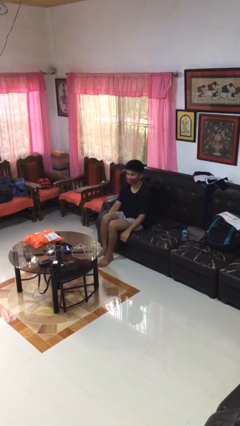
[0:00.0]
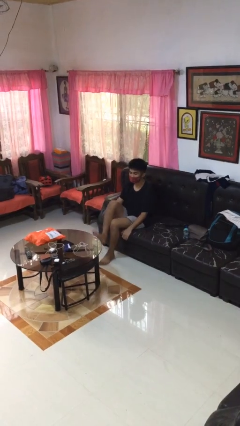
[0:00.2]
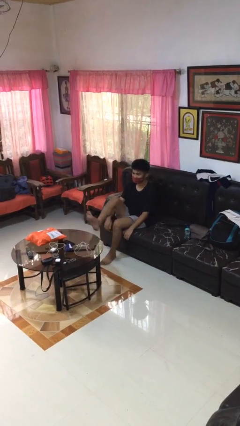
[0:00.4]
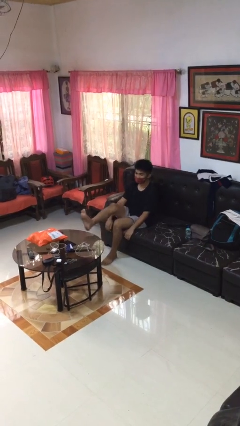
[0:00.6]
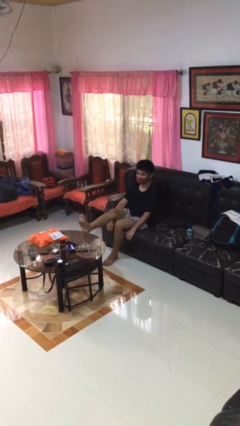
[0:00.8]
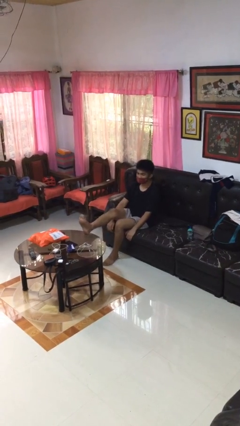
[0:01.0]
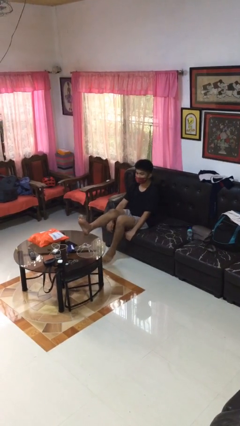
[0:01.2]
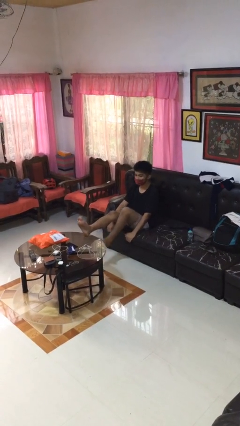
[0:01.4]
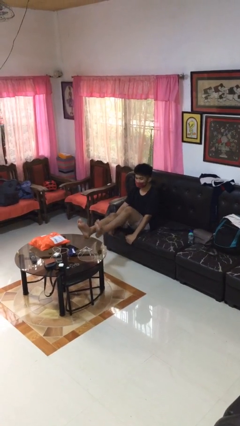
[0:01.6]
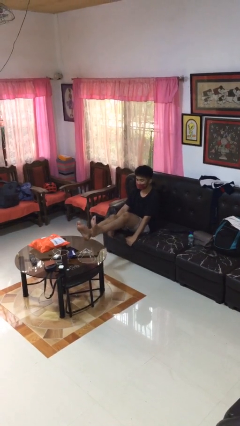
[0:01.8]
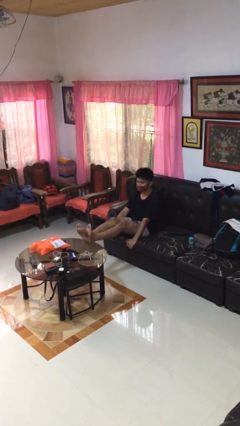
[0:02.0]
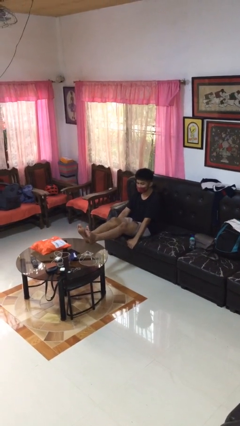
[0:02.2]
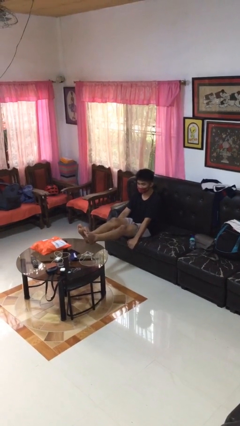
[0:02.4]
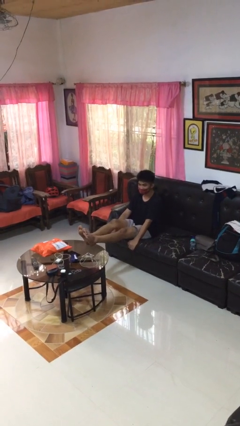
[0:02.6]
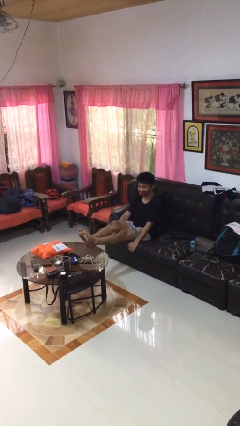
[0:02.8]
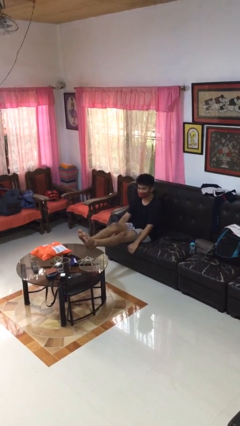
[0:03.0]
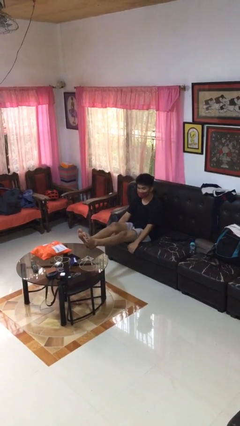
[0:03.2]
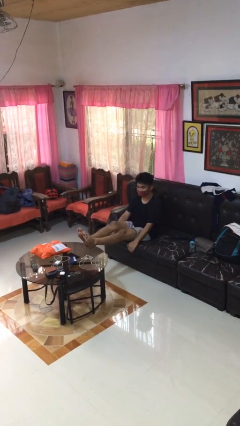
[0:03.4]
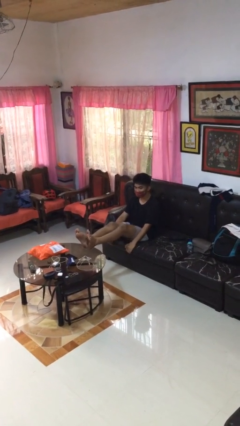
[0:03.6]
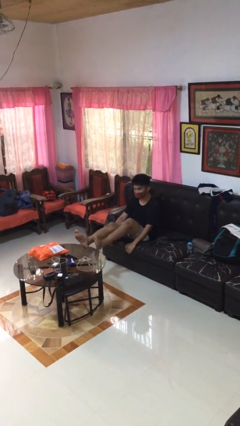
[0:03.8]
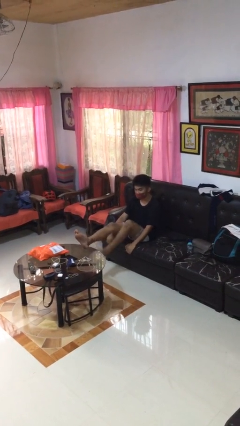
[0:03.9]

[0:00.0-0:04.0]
person puts feet up

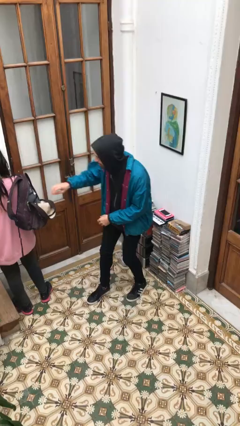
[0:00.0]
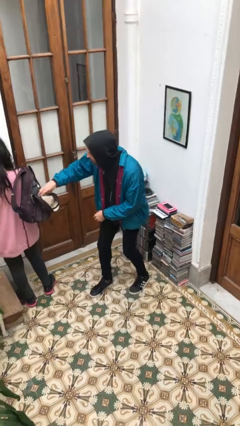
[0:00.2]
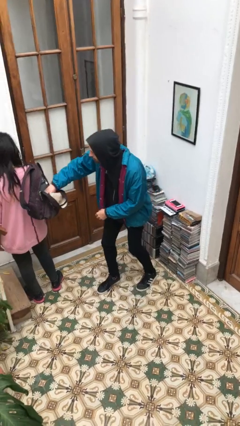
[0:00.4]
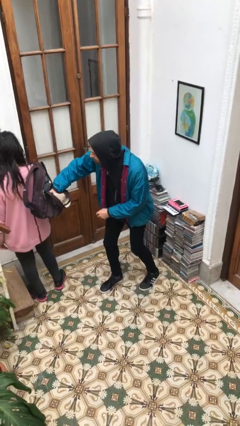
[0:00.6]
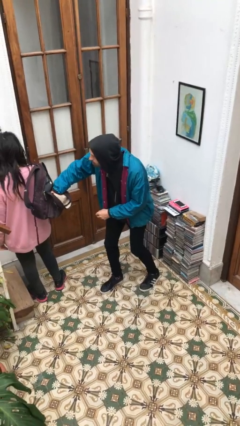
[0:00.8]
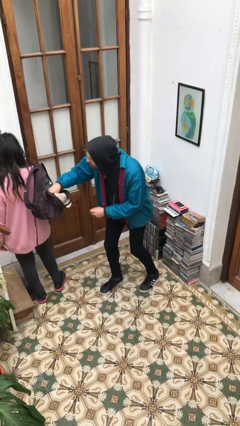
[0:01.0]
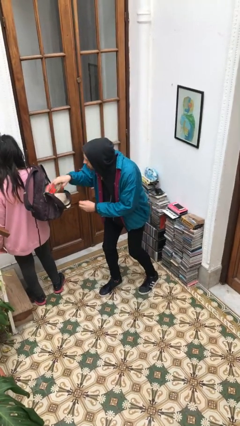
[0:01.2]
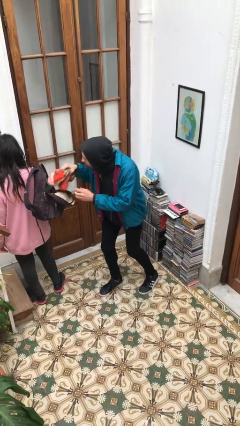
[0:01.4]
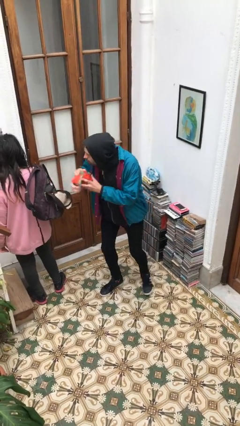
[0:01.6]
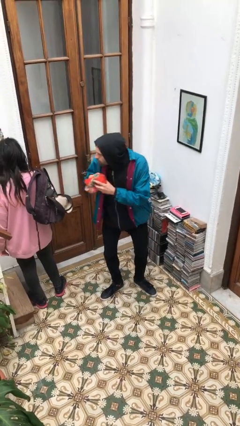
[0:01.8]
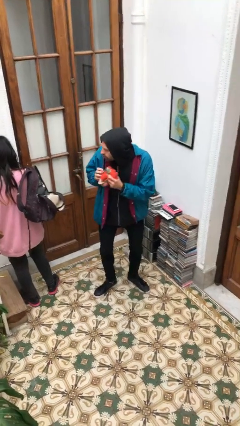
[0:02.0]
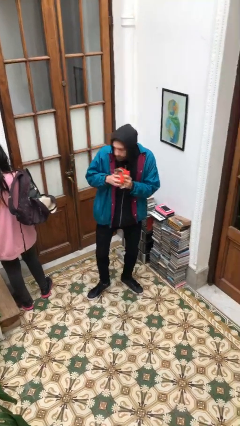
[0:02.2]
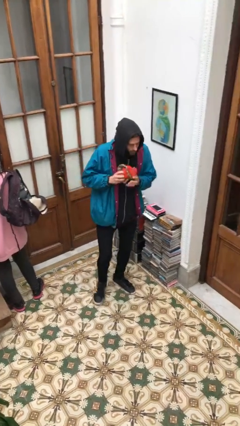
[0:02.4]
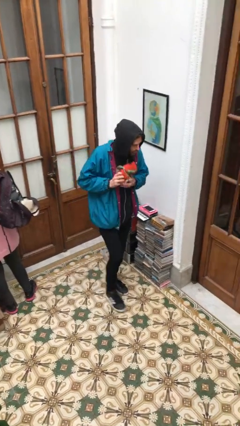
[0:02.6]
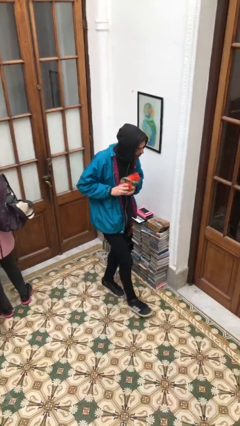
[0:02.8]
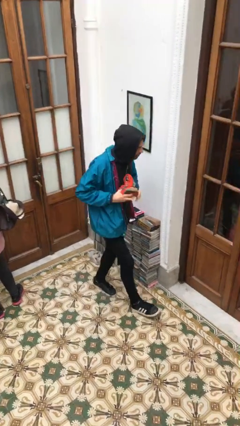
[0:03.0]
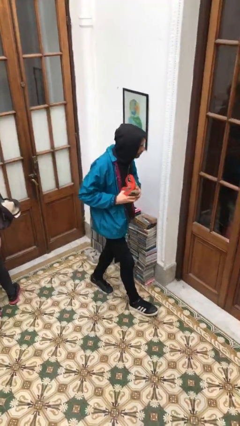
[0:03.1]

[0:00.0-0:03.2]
person steals object from person

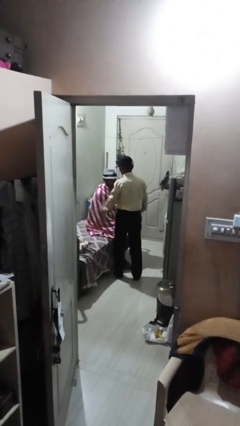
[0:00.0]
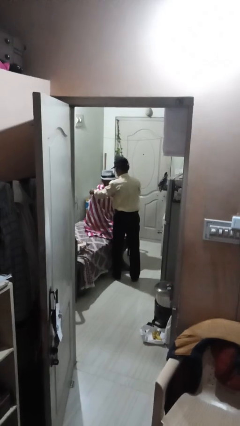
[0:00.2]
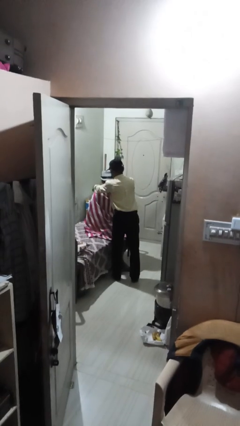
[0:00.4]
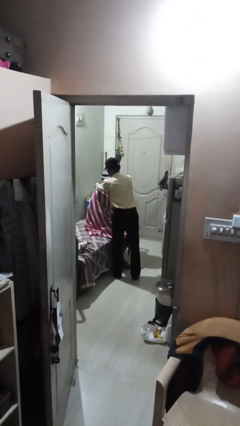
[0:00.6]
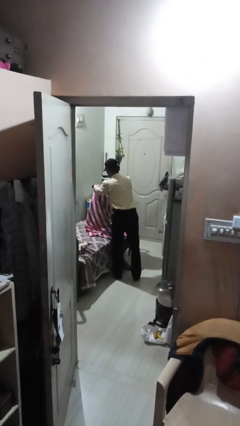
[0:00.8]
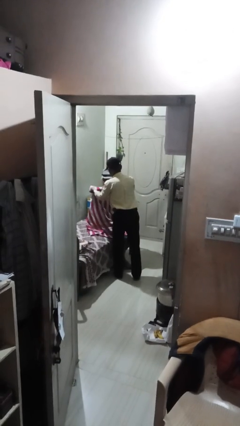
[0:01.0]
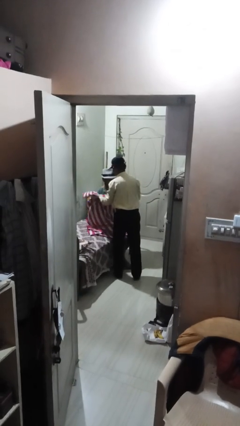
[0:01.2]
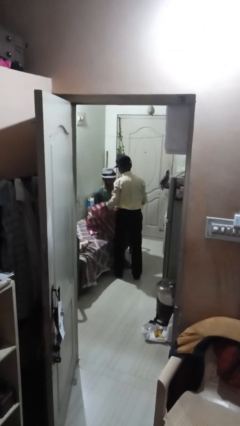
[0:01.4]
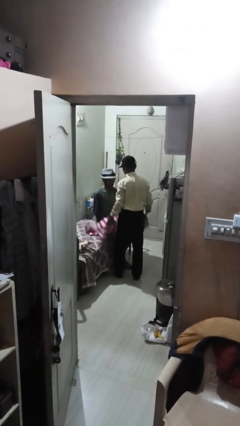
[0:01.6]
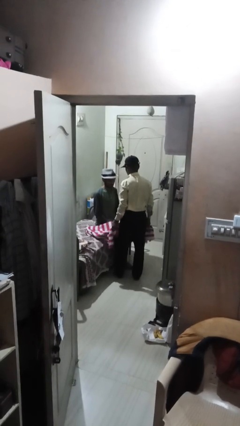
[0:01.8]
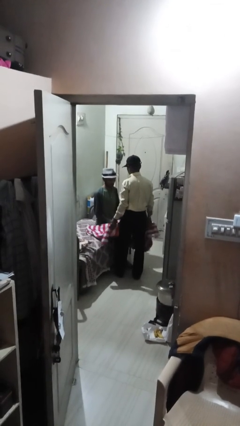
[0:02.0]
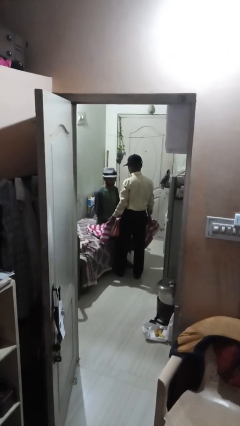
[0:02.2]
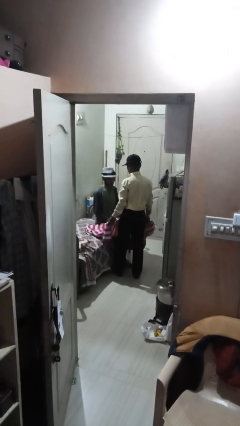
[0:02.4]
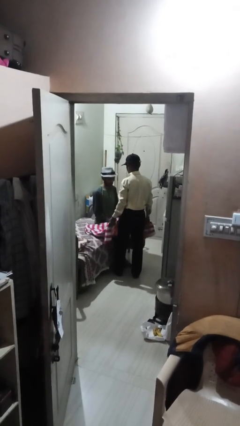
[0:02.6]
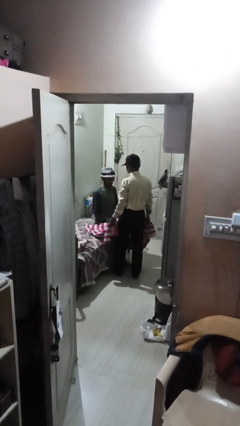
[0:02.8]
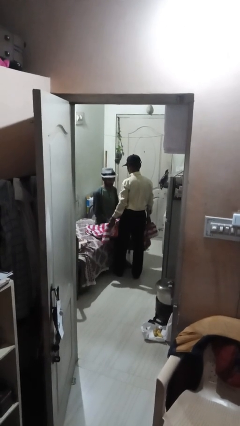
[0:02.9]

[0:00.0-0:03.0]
person uncovers friend with blanket

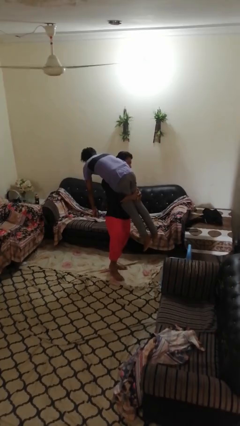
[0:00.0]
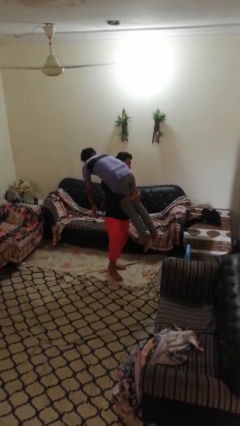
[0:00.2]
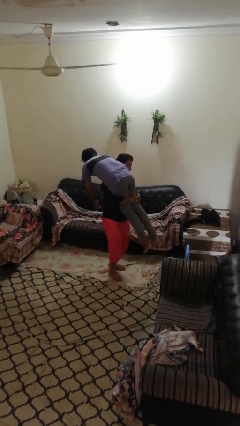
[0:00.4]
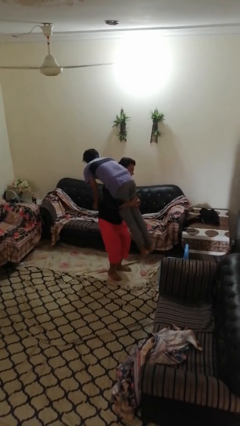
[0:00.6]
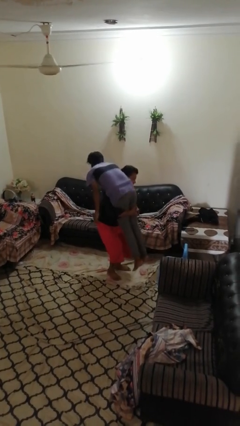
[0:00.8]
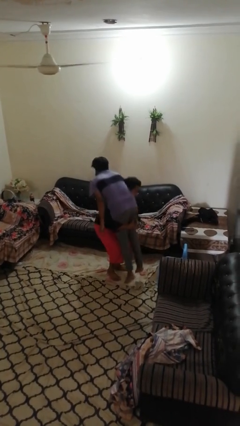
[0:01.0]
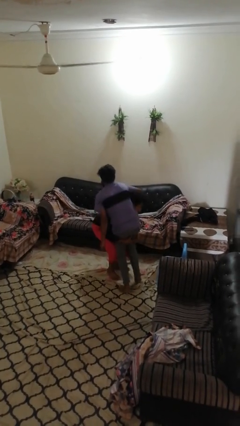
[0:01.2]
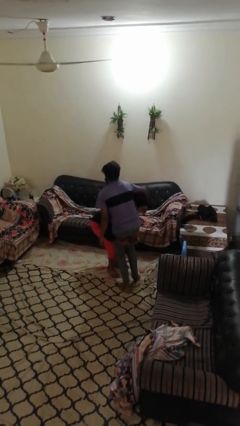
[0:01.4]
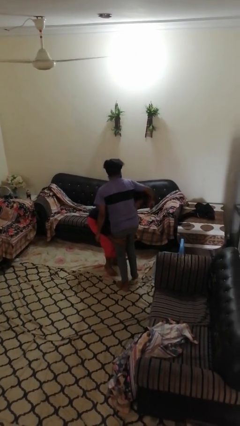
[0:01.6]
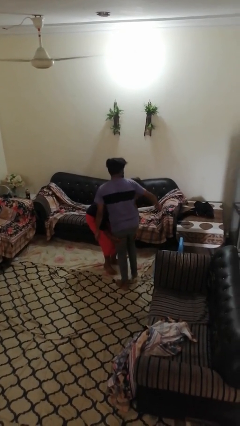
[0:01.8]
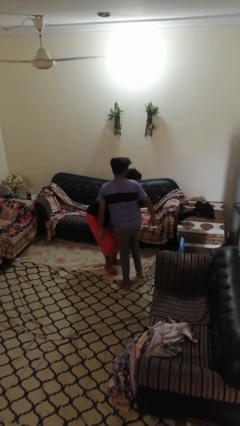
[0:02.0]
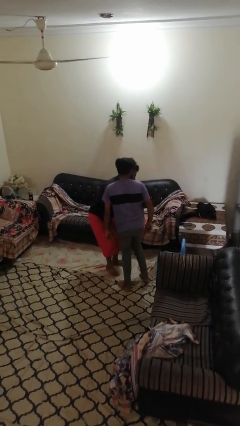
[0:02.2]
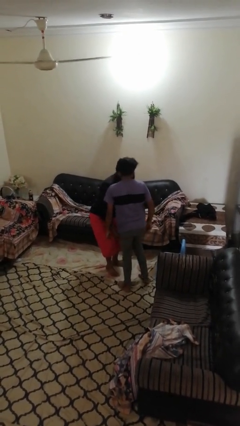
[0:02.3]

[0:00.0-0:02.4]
person puts down person

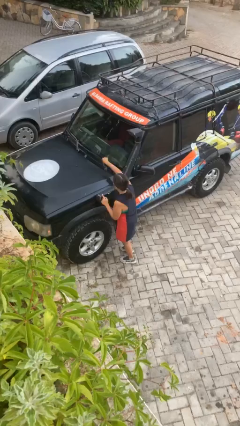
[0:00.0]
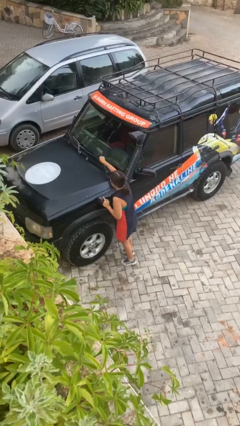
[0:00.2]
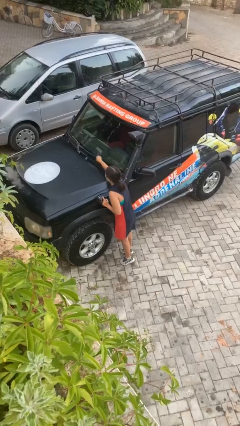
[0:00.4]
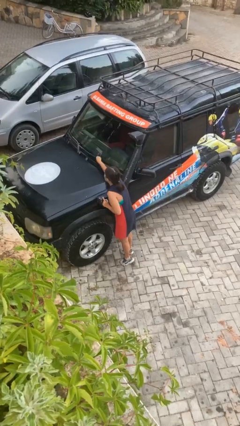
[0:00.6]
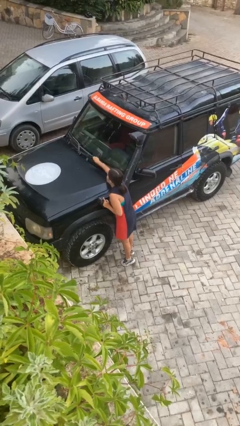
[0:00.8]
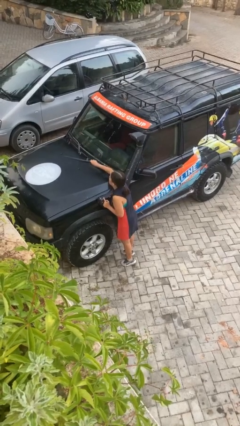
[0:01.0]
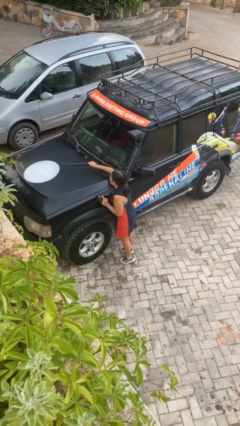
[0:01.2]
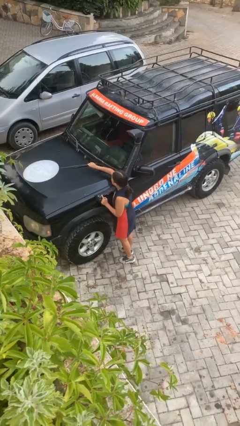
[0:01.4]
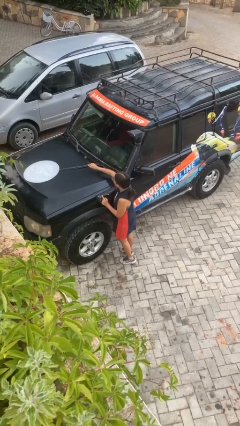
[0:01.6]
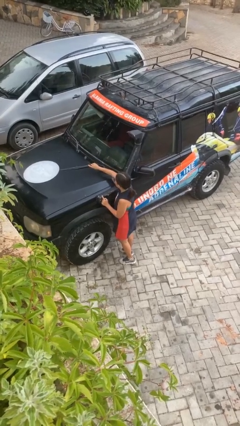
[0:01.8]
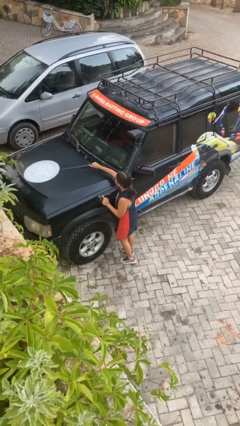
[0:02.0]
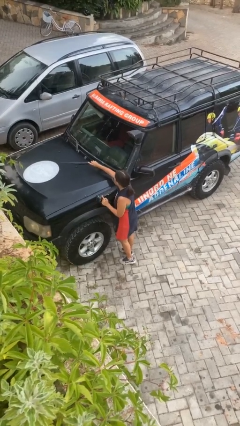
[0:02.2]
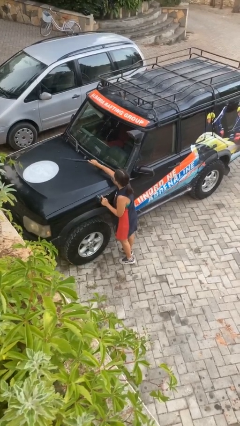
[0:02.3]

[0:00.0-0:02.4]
person flips up car wipers

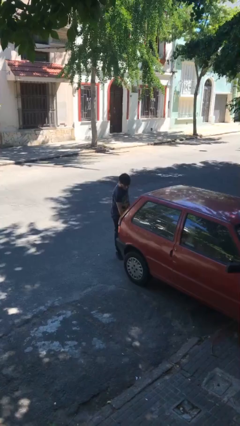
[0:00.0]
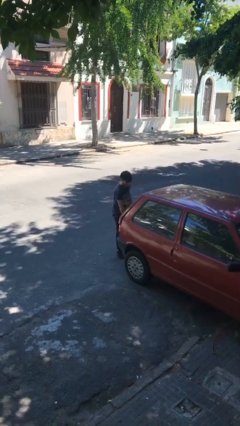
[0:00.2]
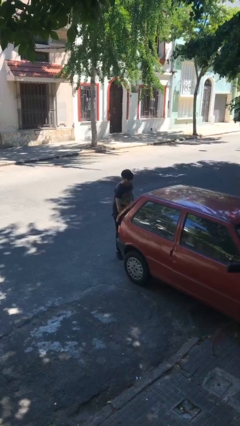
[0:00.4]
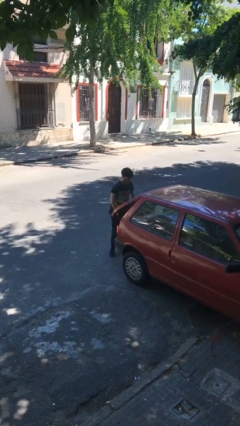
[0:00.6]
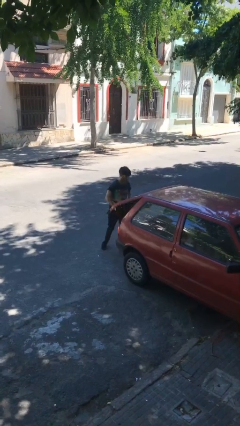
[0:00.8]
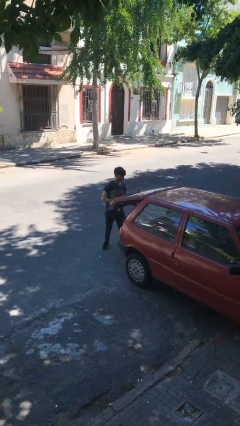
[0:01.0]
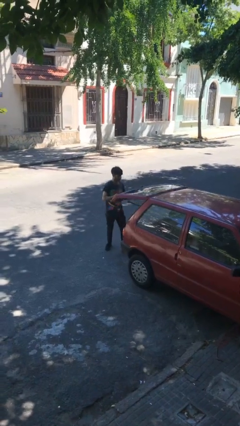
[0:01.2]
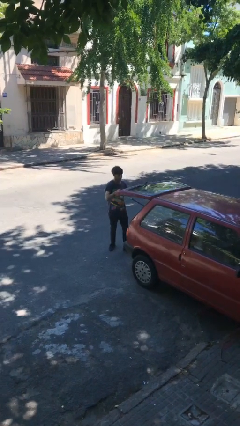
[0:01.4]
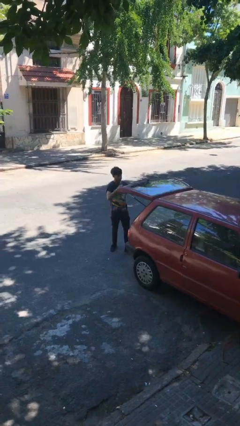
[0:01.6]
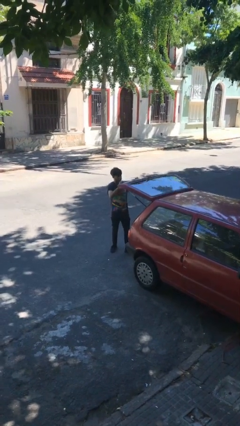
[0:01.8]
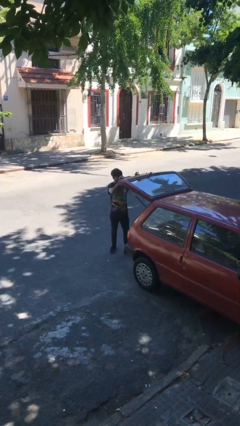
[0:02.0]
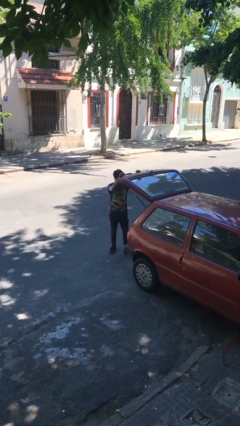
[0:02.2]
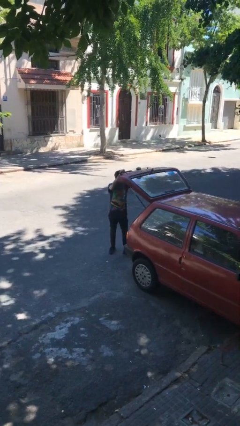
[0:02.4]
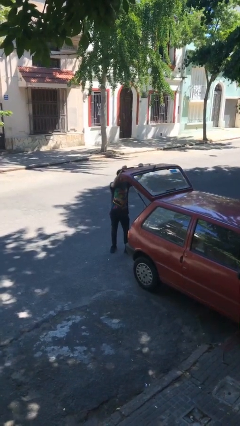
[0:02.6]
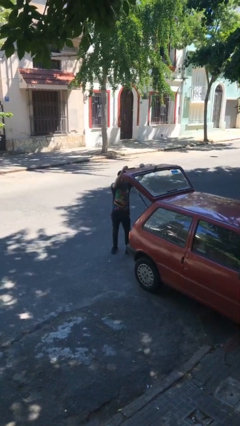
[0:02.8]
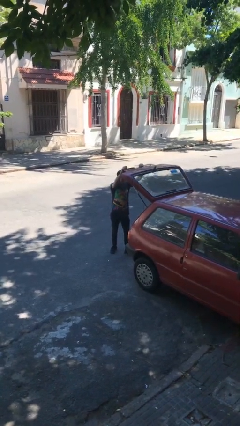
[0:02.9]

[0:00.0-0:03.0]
person opens car trunk
